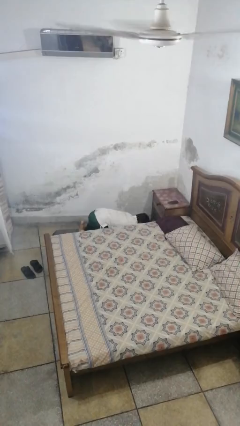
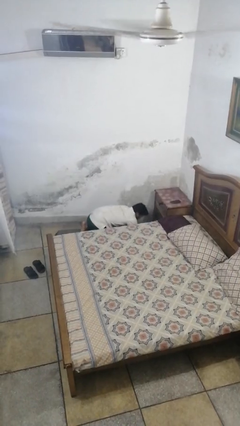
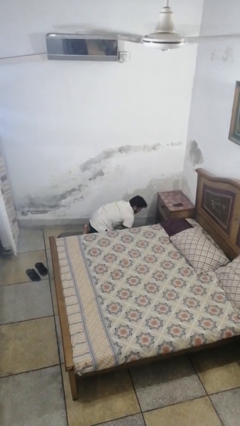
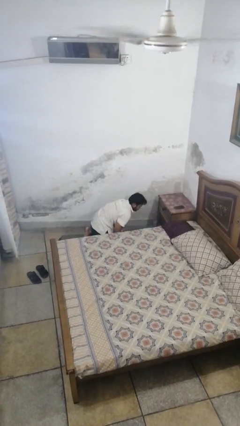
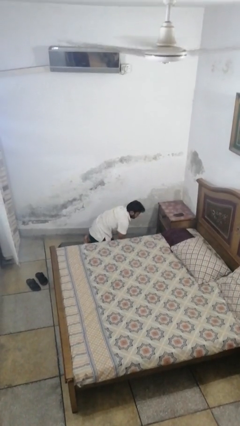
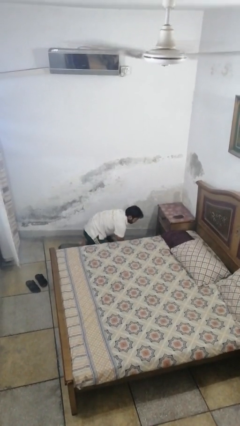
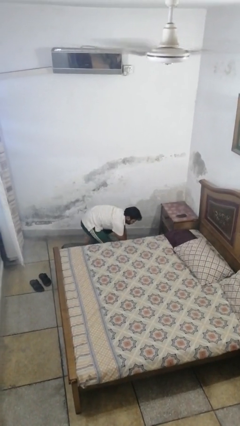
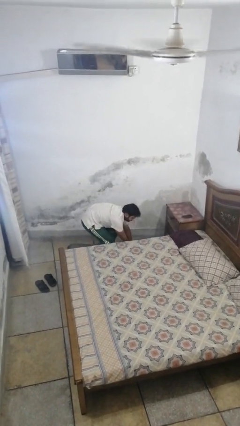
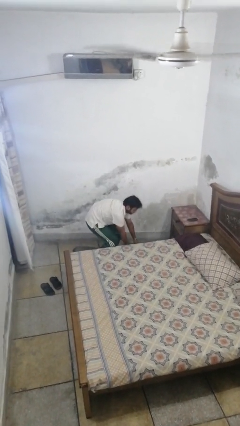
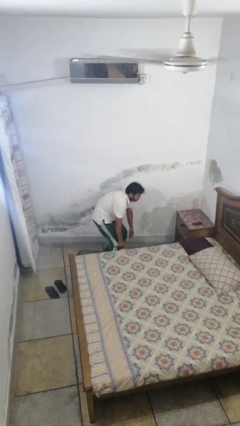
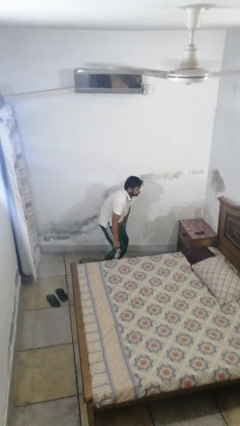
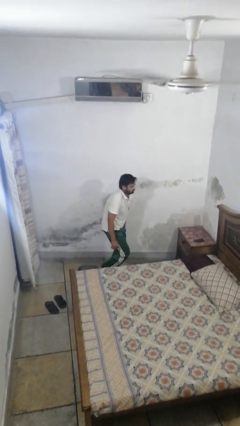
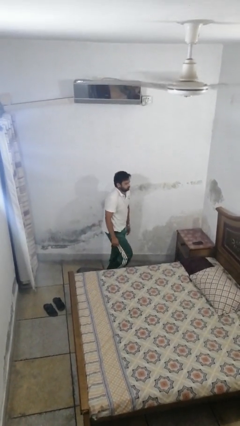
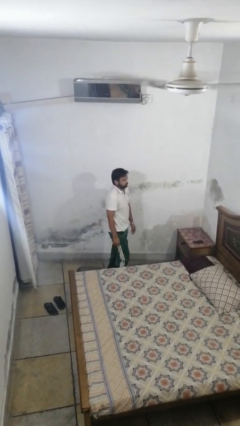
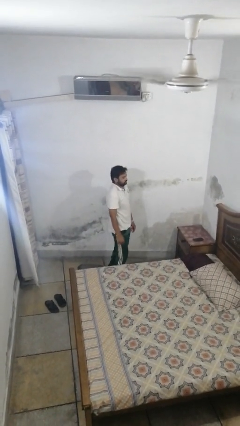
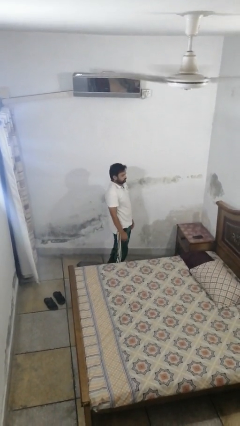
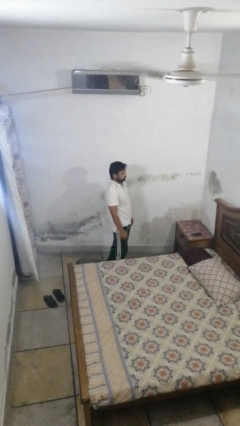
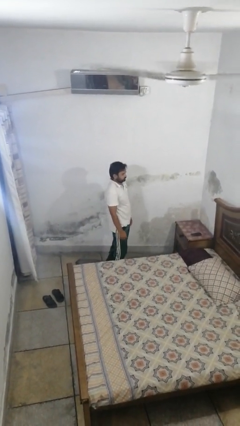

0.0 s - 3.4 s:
person stands up from floor

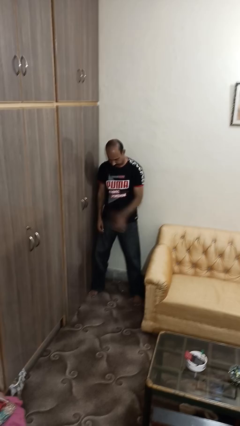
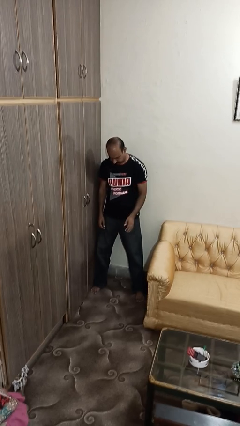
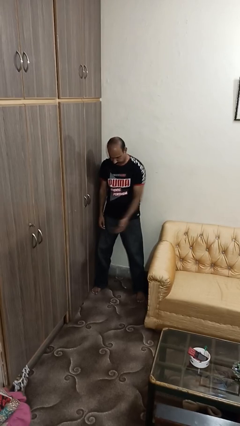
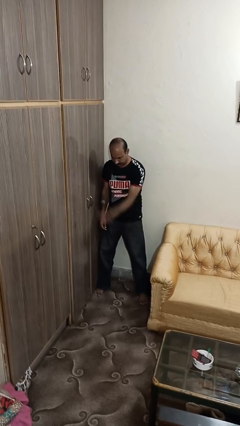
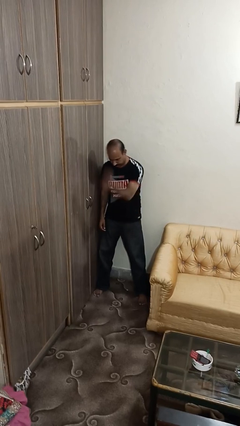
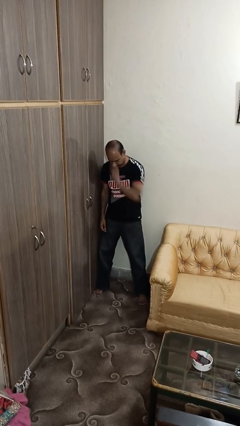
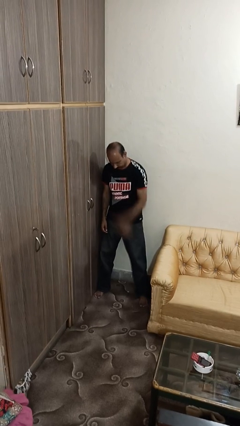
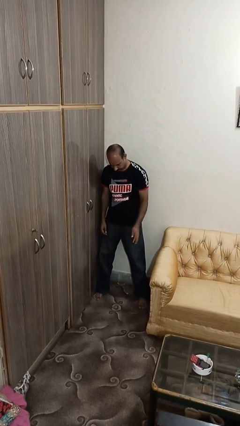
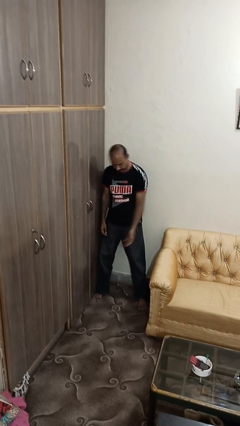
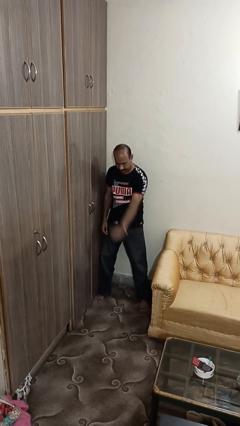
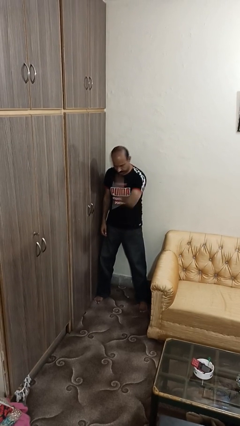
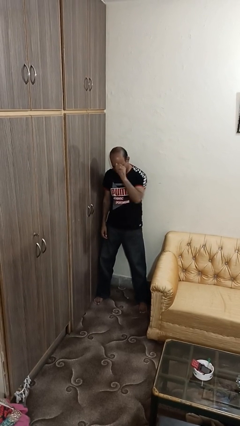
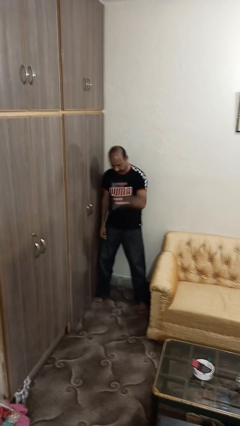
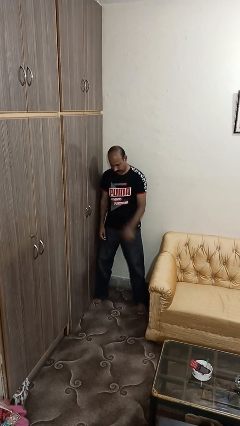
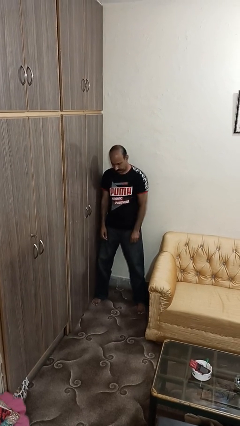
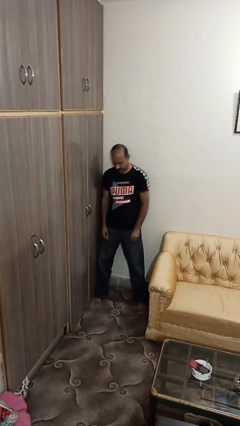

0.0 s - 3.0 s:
person bounces ball on floor

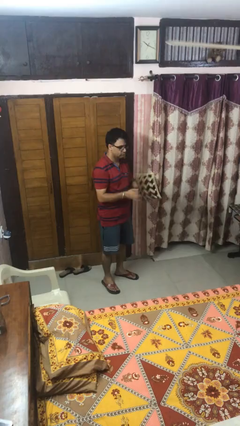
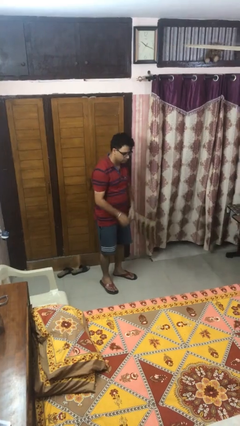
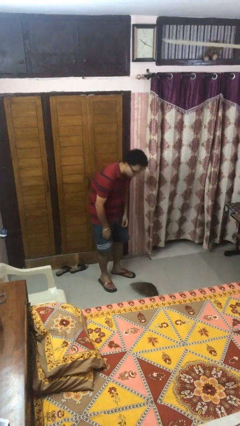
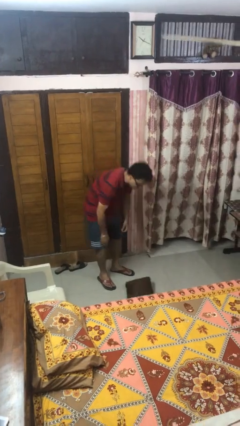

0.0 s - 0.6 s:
person drops object

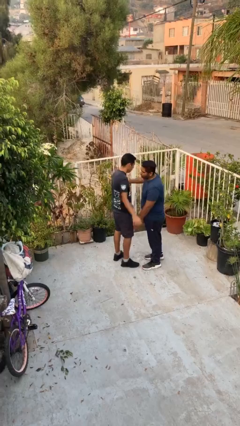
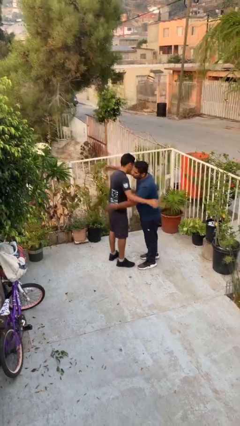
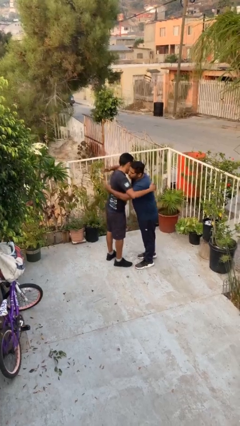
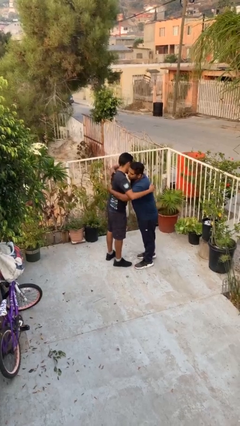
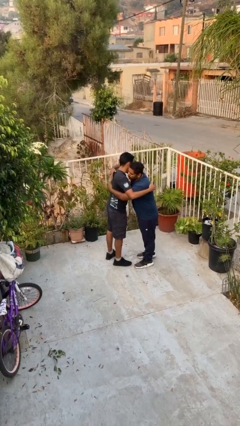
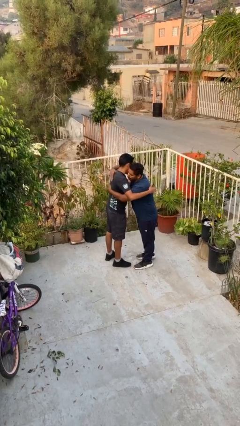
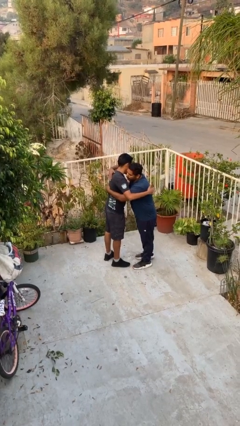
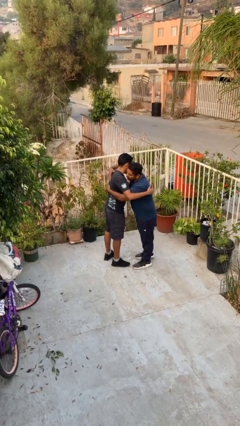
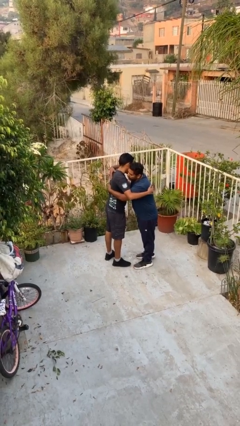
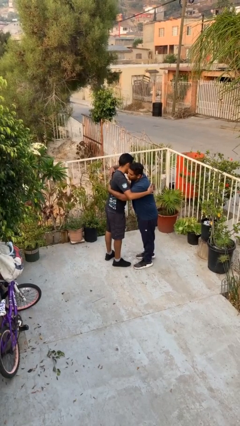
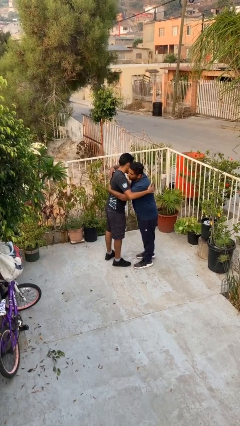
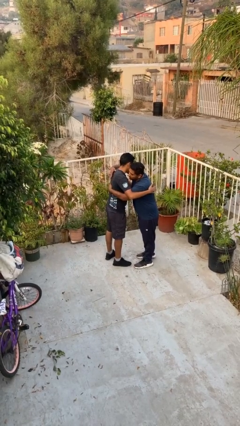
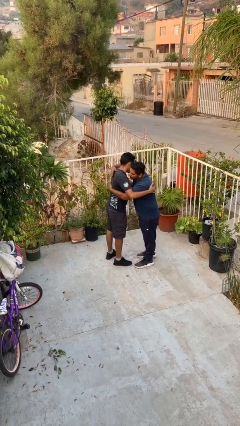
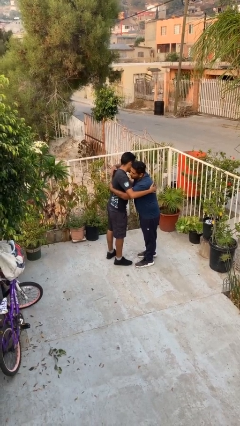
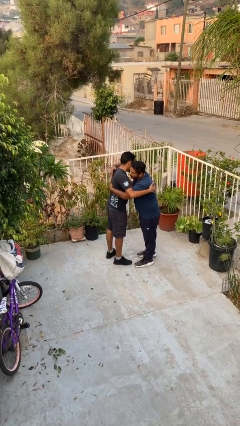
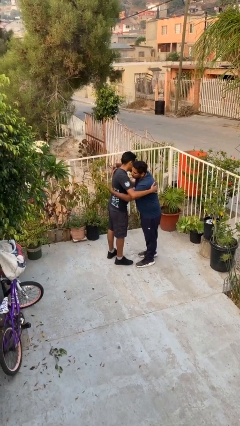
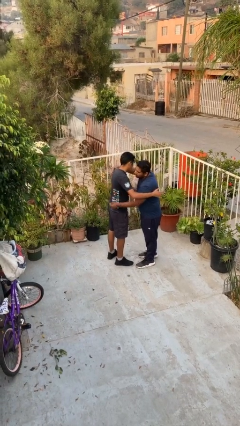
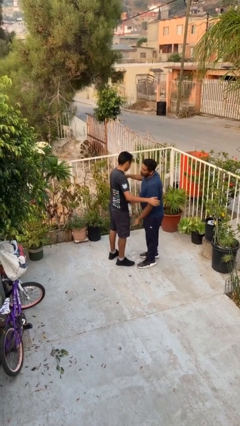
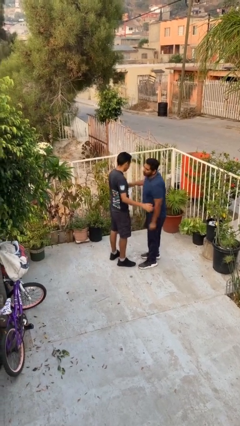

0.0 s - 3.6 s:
person embraces person

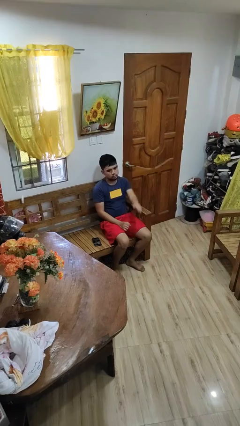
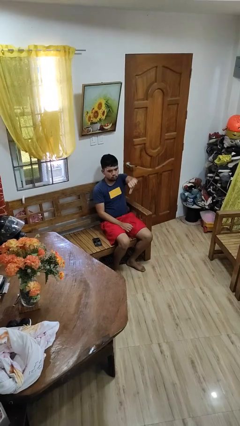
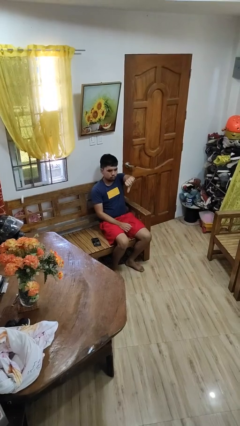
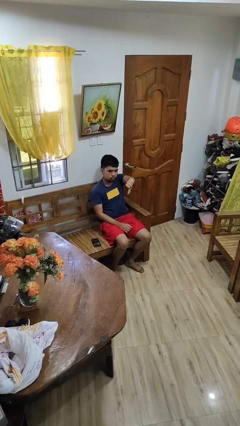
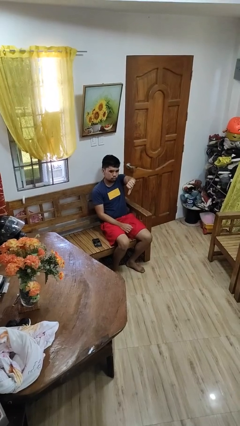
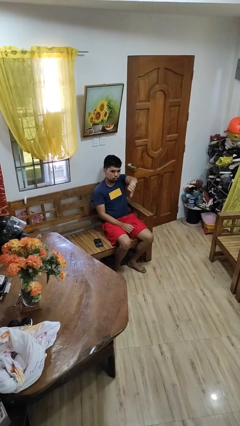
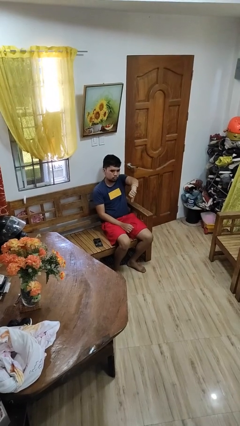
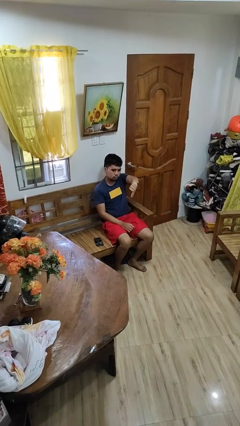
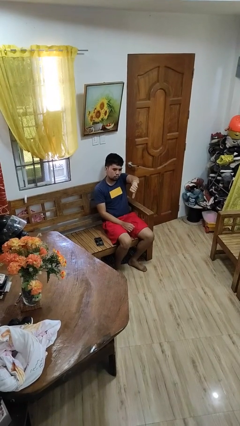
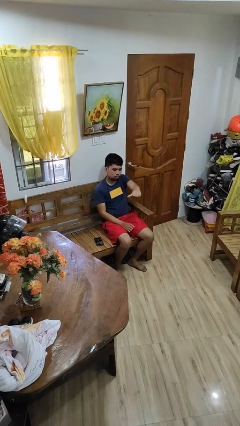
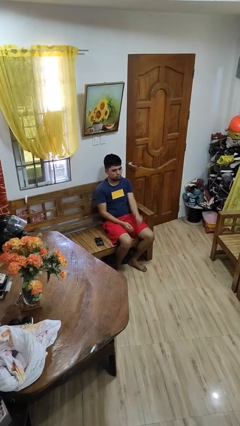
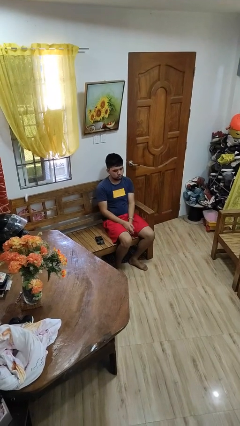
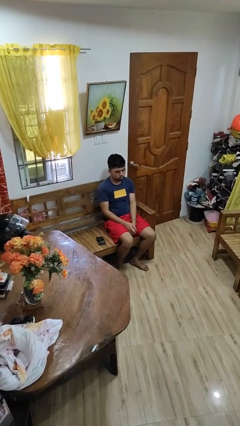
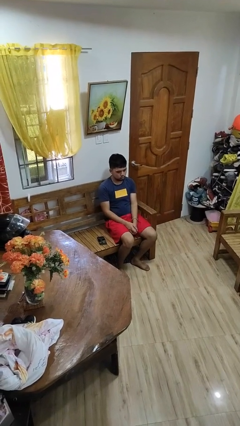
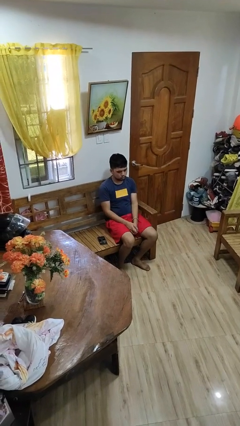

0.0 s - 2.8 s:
person gestures thumbs down

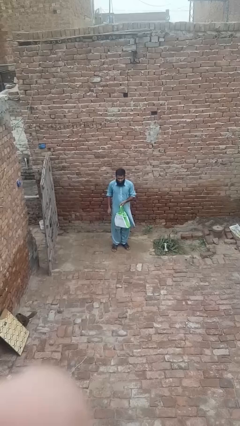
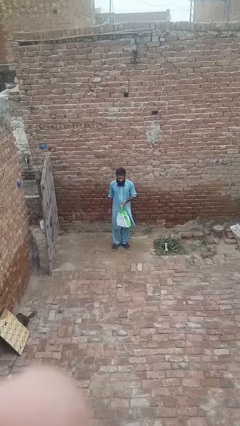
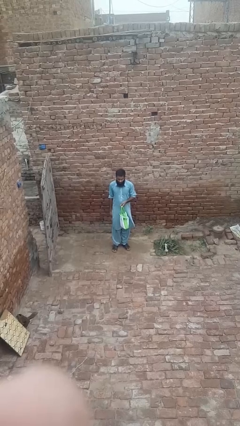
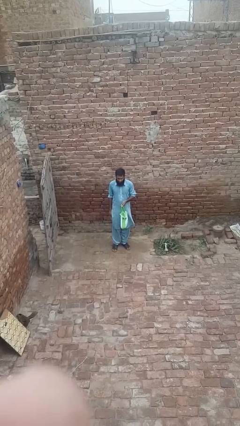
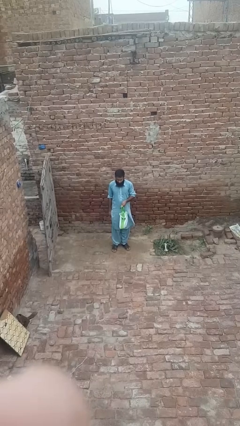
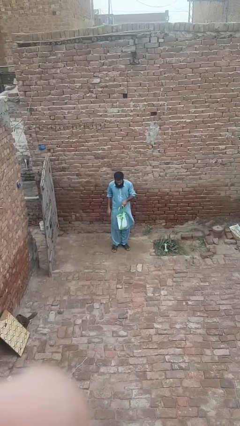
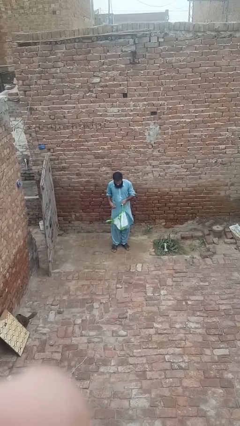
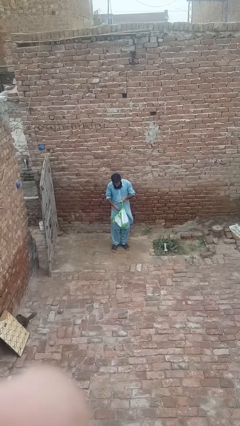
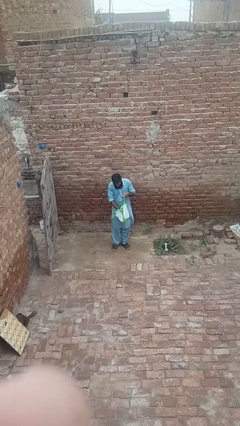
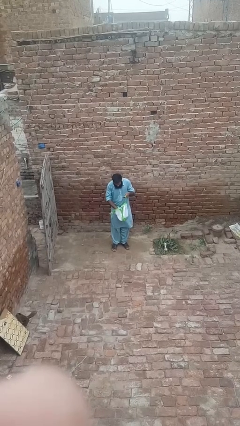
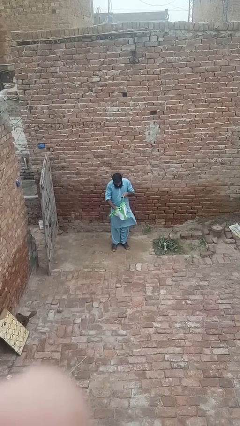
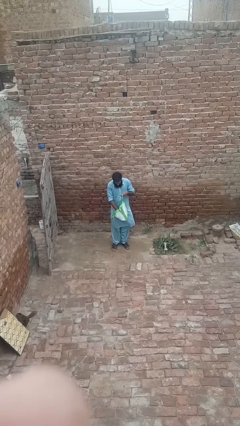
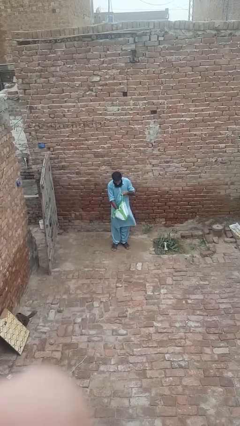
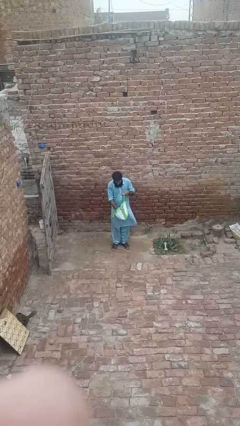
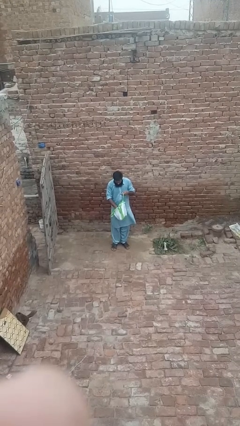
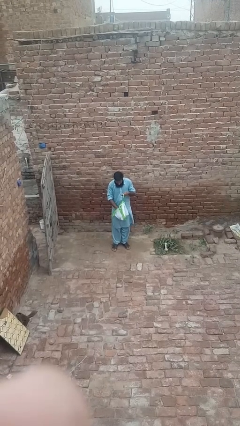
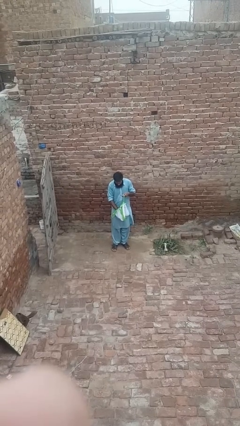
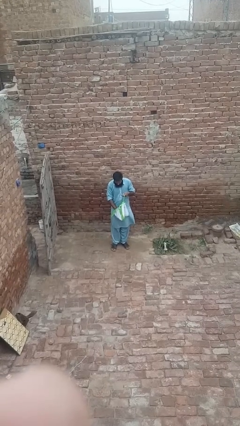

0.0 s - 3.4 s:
person searches in bag

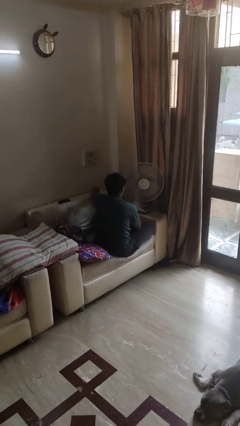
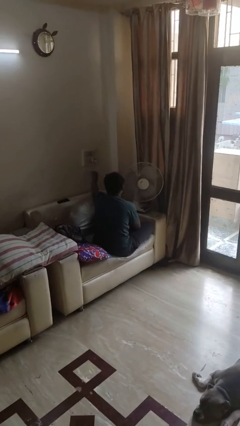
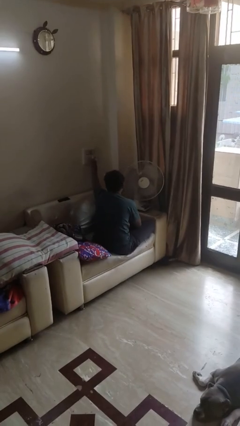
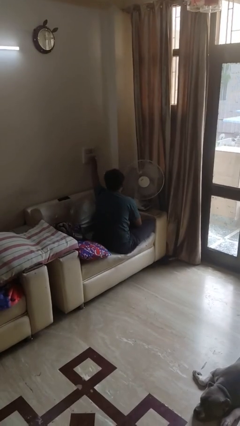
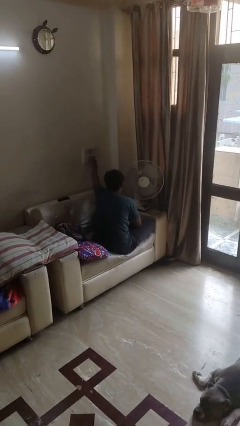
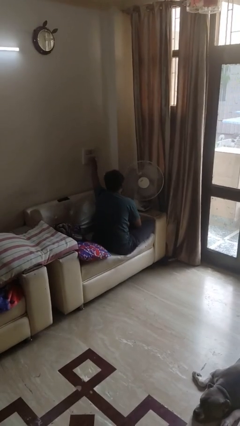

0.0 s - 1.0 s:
person turns off fan
